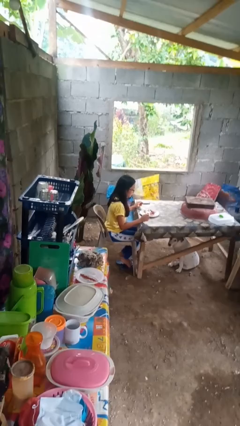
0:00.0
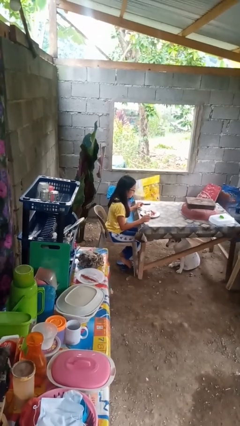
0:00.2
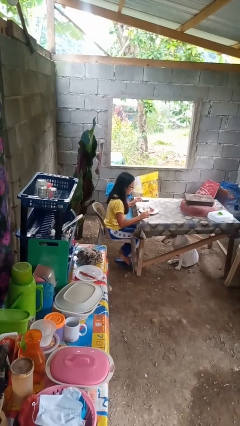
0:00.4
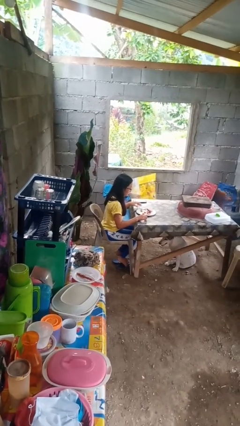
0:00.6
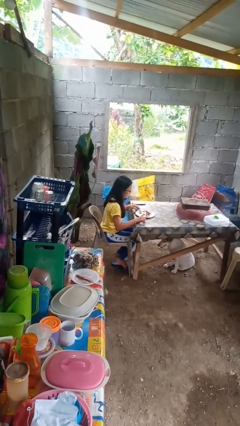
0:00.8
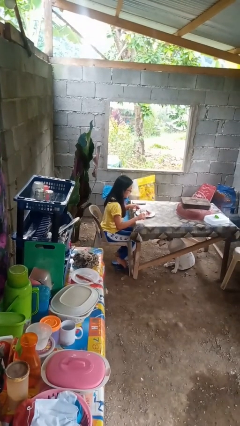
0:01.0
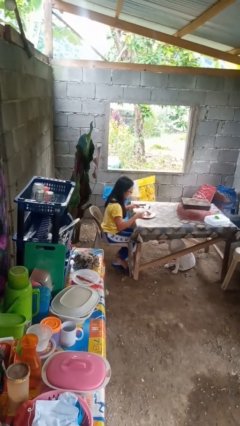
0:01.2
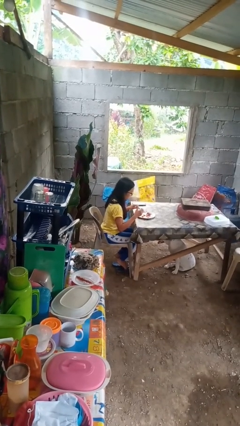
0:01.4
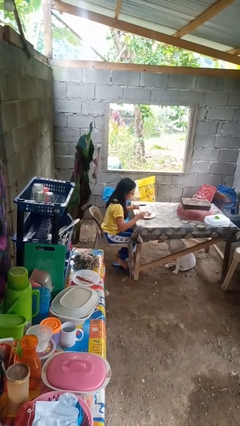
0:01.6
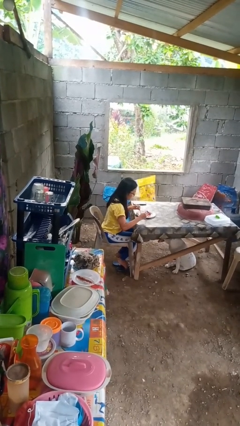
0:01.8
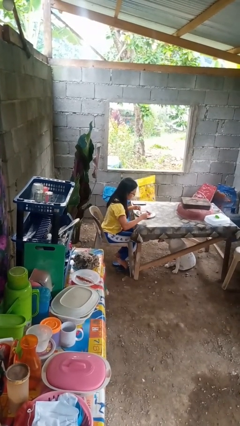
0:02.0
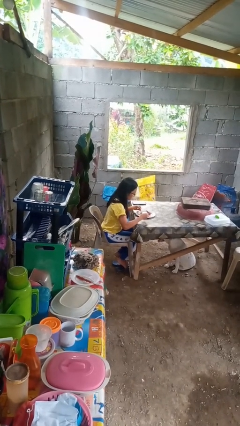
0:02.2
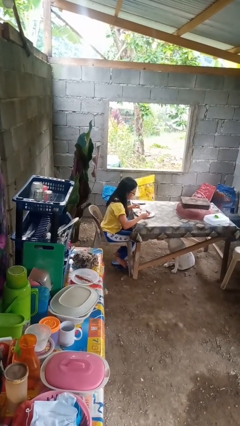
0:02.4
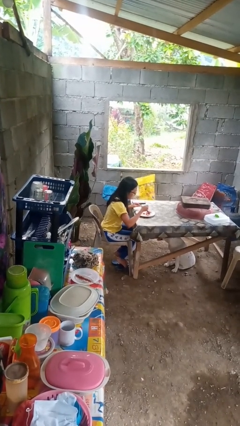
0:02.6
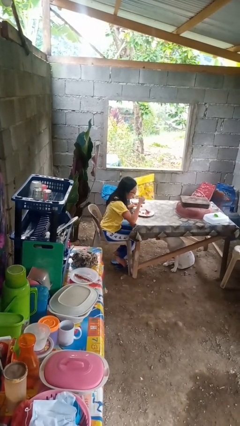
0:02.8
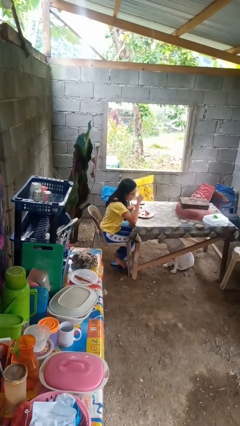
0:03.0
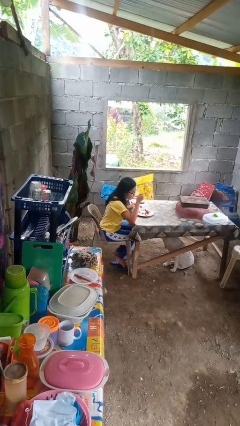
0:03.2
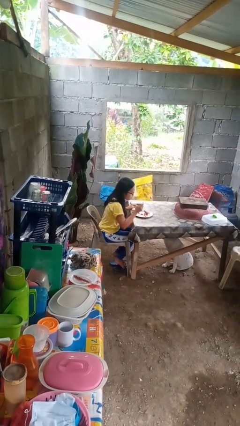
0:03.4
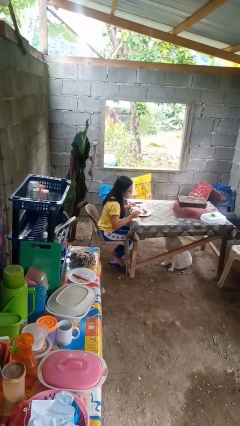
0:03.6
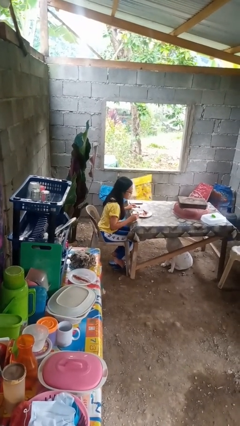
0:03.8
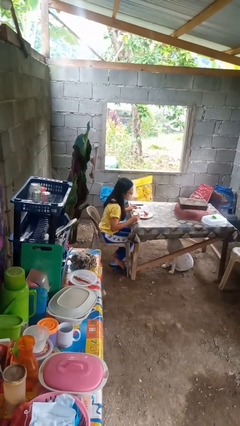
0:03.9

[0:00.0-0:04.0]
person eats with utensil

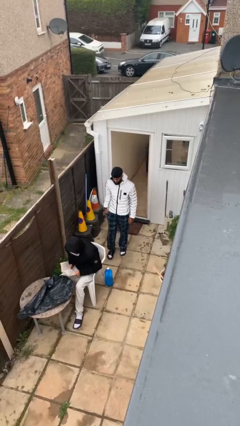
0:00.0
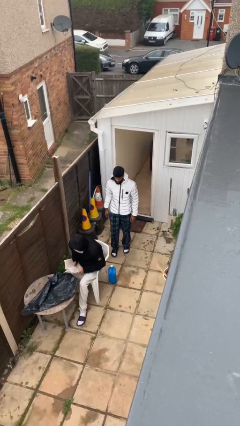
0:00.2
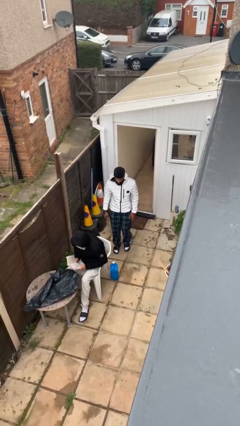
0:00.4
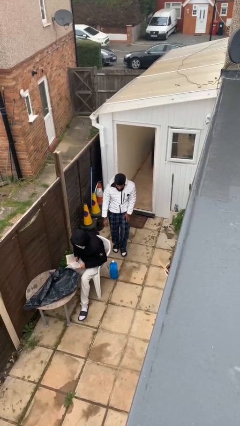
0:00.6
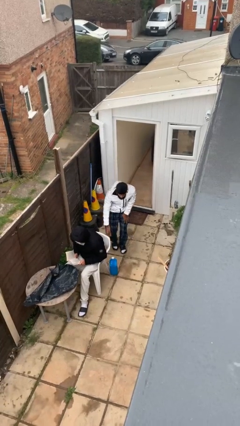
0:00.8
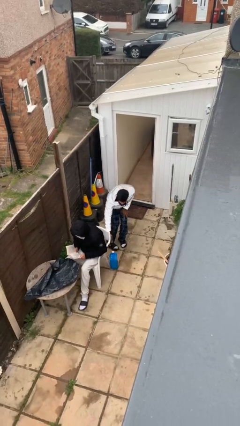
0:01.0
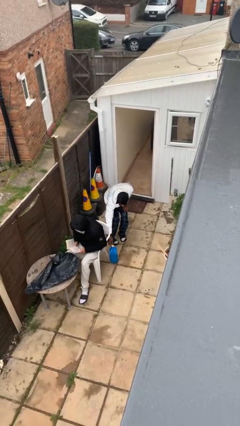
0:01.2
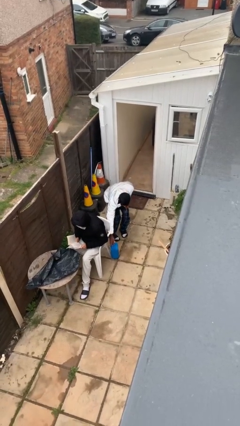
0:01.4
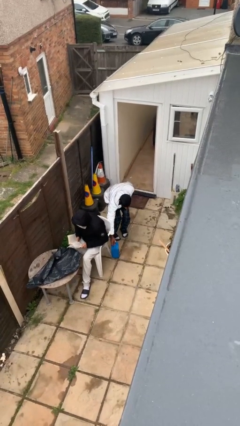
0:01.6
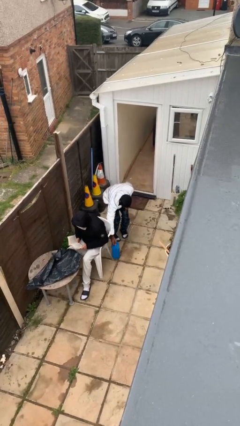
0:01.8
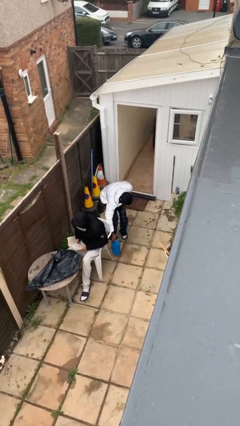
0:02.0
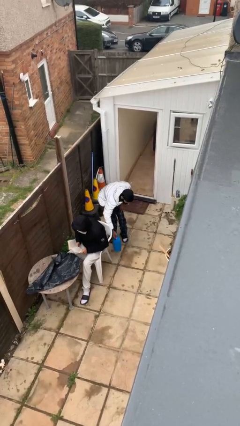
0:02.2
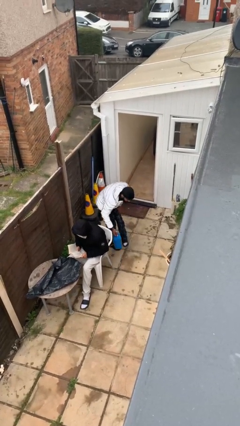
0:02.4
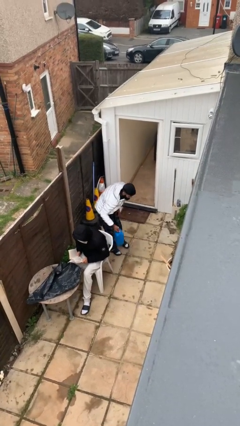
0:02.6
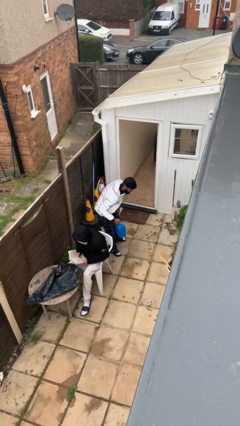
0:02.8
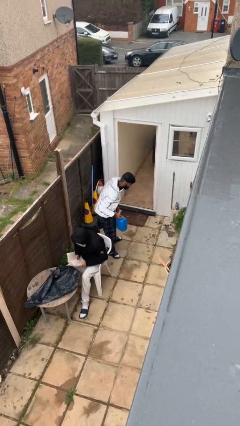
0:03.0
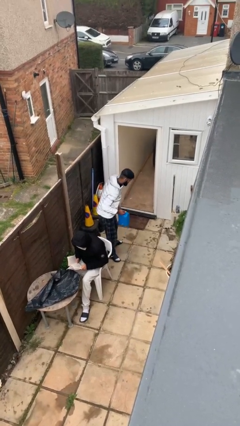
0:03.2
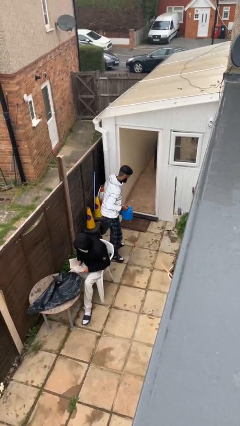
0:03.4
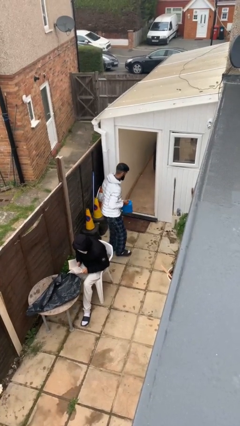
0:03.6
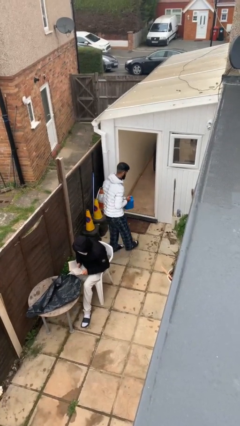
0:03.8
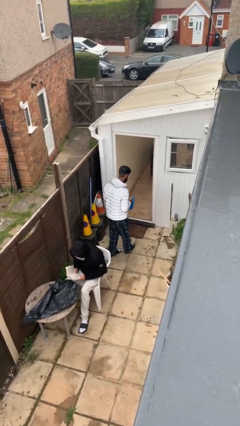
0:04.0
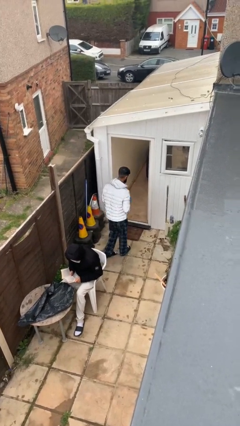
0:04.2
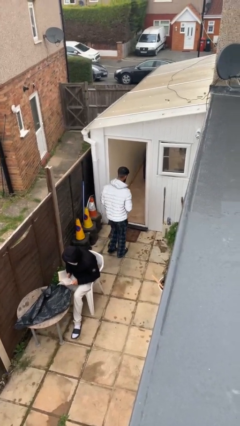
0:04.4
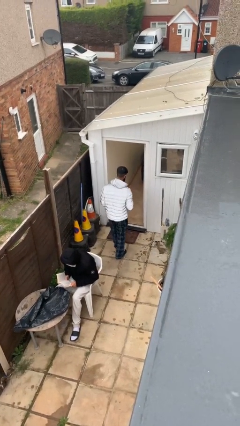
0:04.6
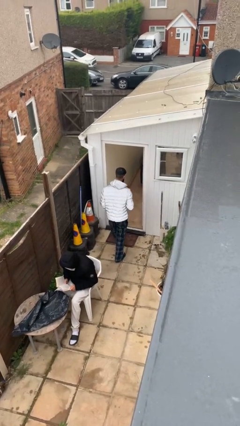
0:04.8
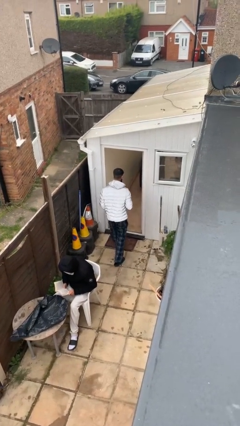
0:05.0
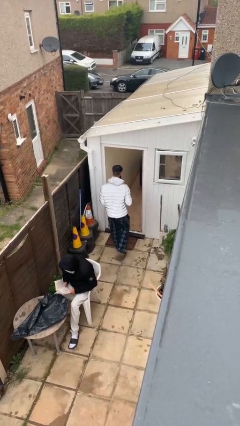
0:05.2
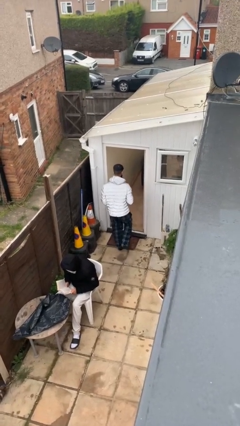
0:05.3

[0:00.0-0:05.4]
person steals object from person

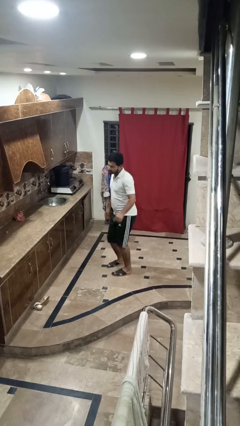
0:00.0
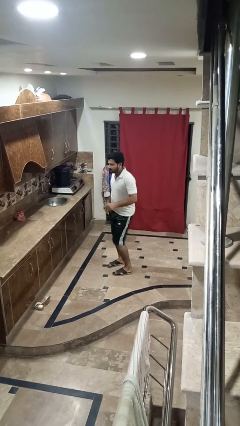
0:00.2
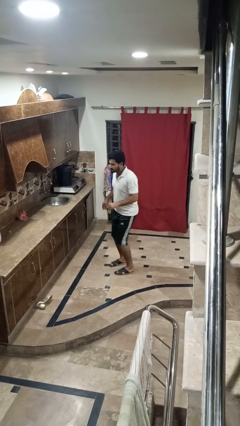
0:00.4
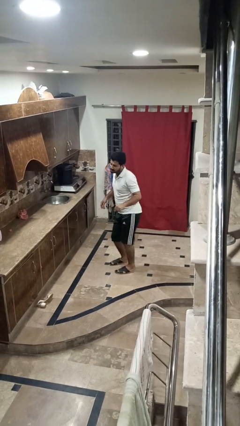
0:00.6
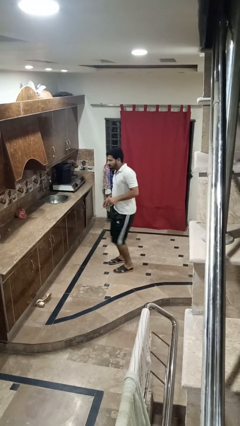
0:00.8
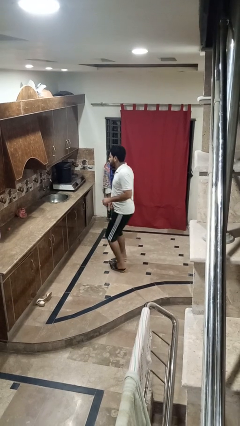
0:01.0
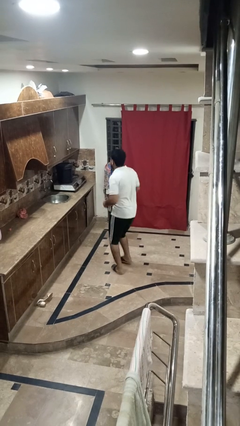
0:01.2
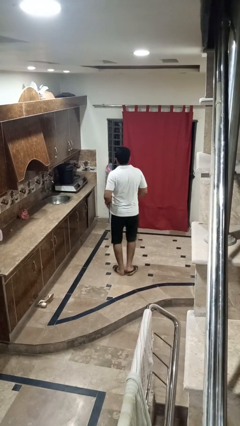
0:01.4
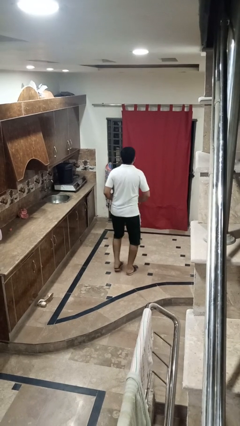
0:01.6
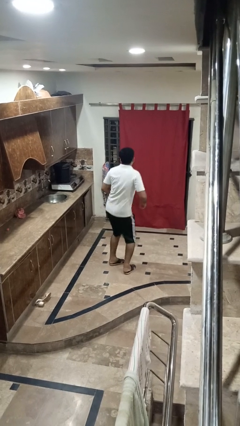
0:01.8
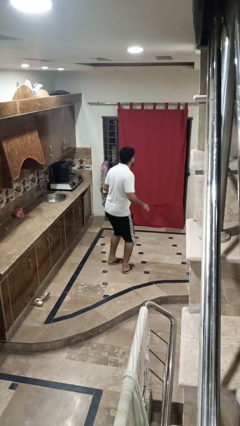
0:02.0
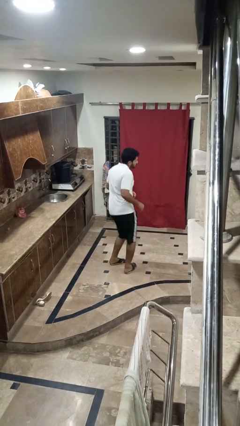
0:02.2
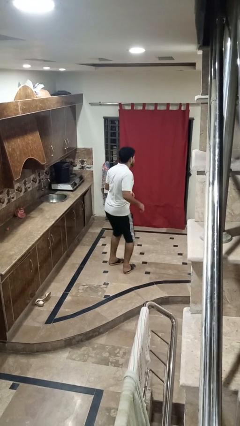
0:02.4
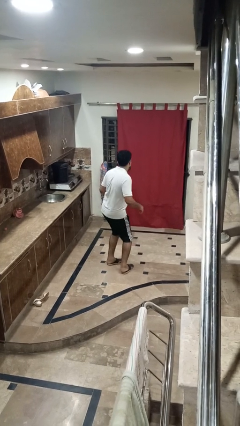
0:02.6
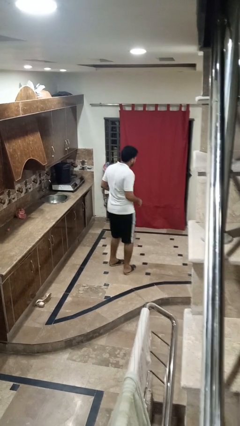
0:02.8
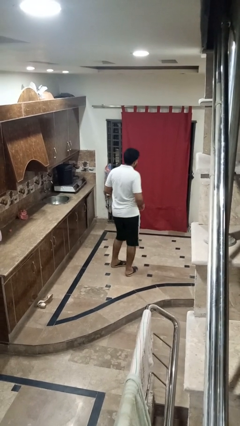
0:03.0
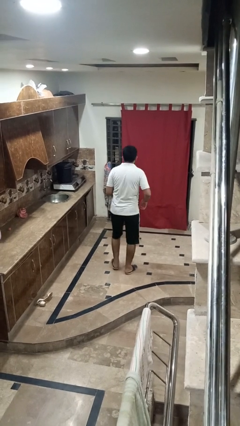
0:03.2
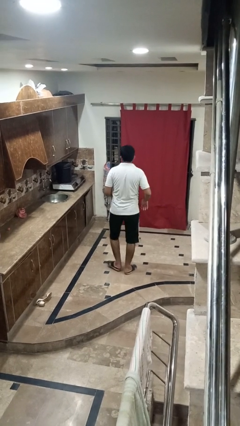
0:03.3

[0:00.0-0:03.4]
person wiggles hips

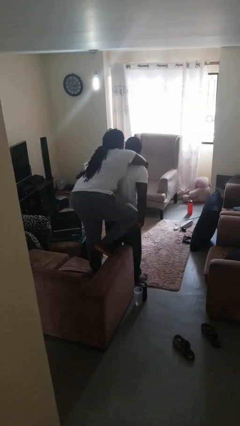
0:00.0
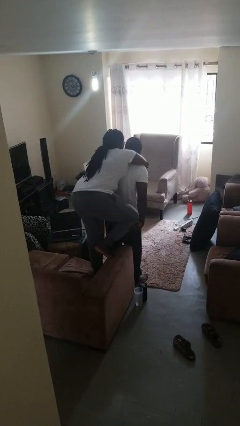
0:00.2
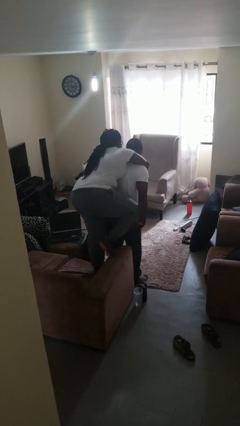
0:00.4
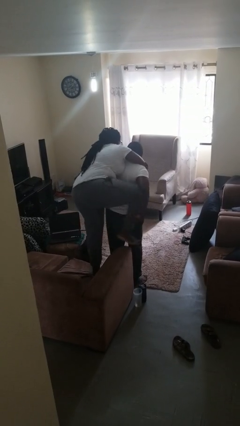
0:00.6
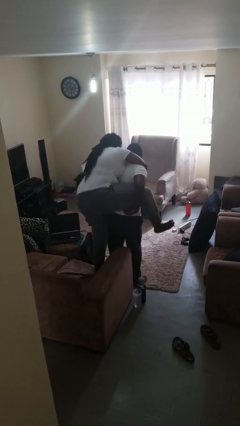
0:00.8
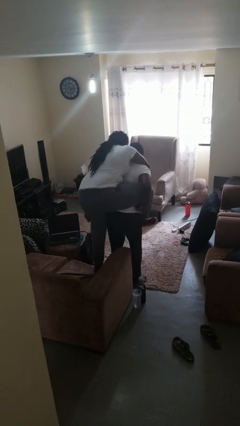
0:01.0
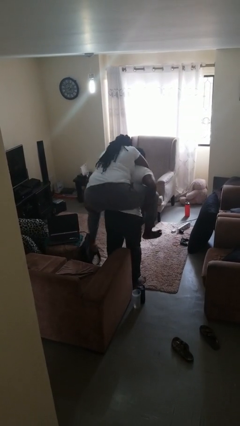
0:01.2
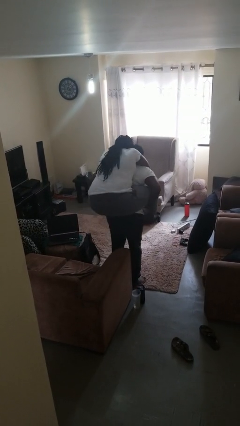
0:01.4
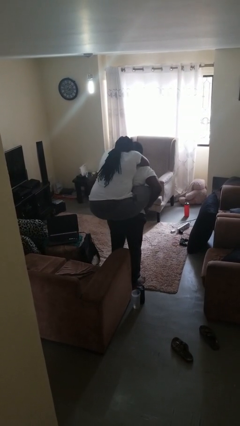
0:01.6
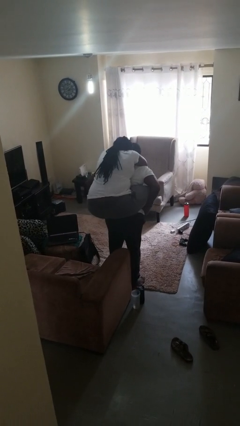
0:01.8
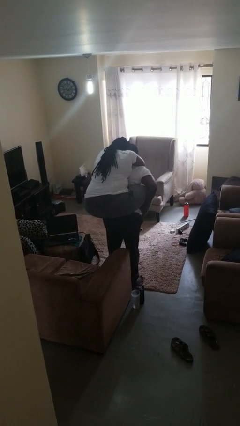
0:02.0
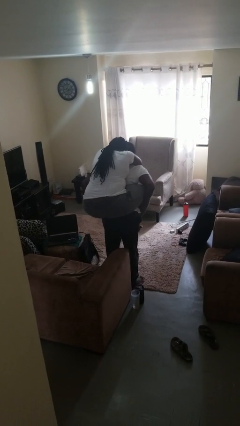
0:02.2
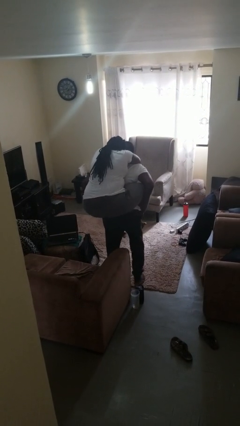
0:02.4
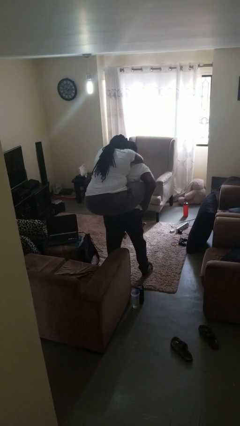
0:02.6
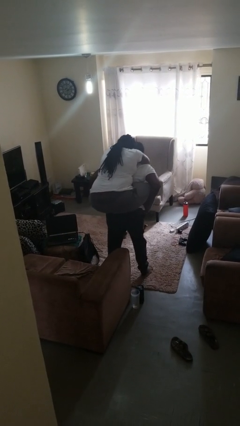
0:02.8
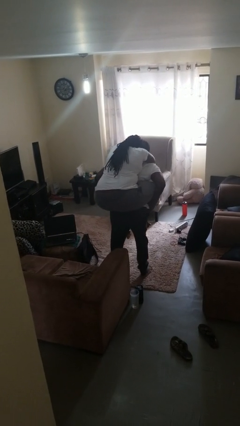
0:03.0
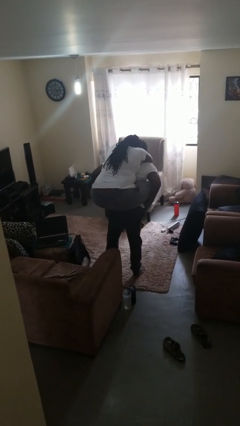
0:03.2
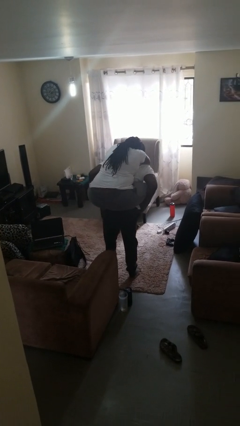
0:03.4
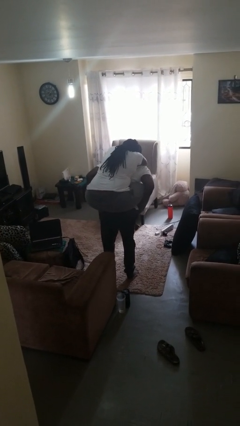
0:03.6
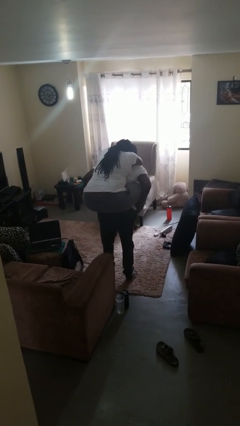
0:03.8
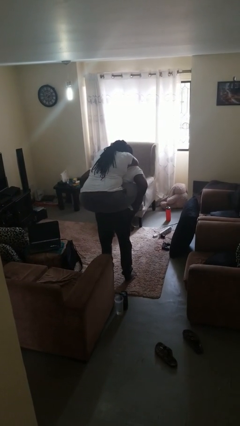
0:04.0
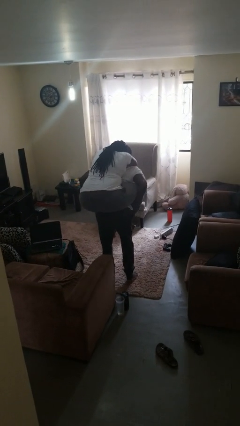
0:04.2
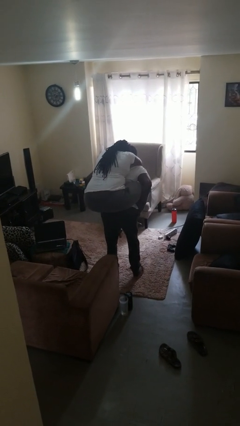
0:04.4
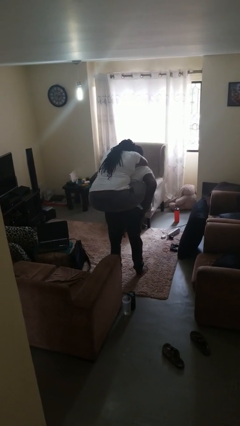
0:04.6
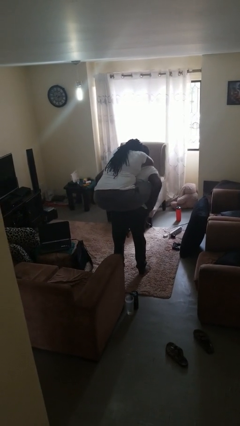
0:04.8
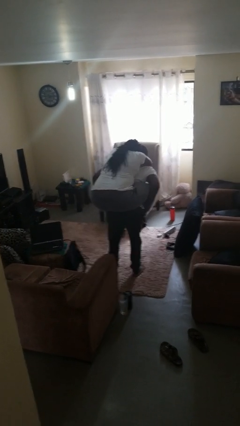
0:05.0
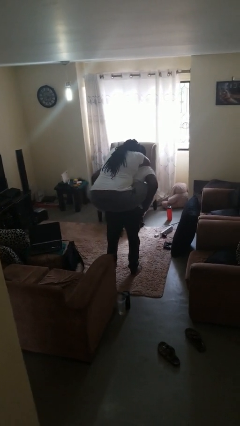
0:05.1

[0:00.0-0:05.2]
person carries person on back
